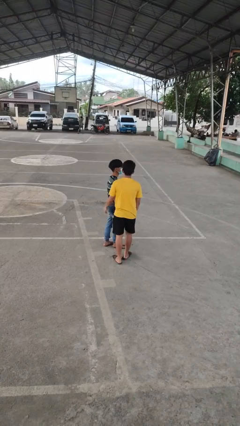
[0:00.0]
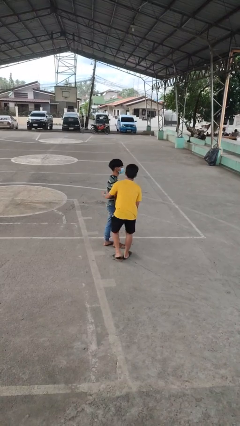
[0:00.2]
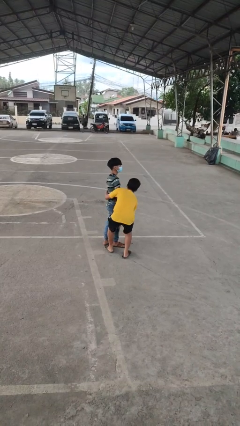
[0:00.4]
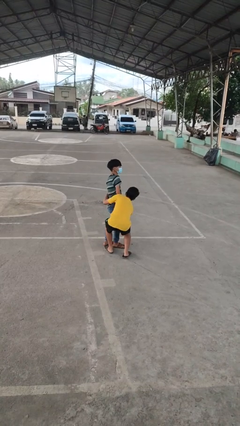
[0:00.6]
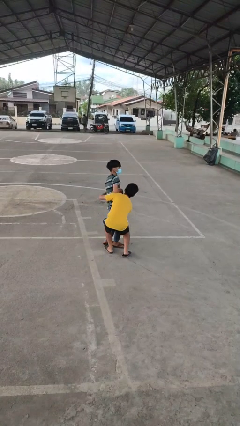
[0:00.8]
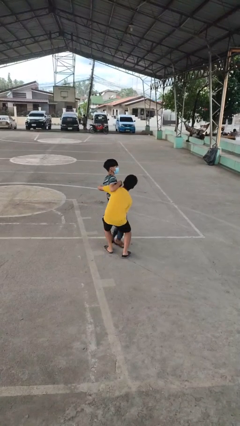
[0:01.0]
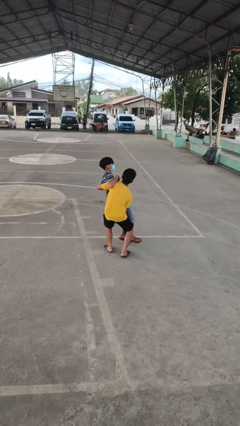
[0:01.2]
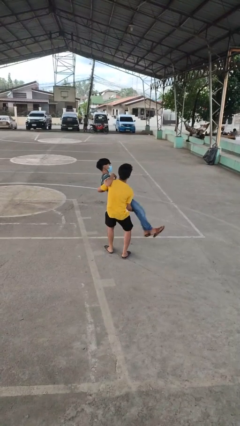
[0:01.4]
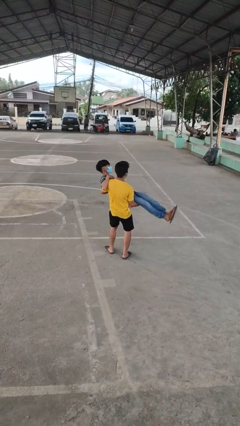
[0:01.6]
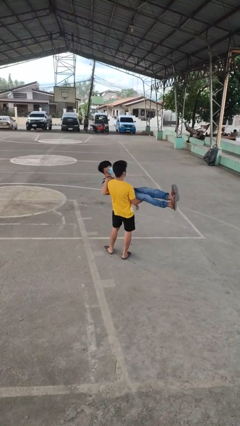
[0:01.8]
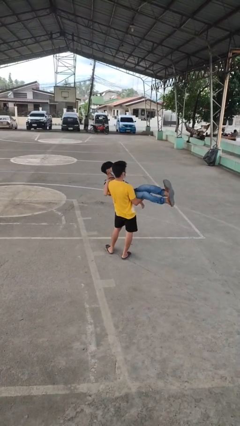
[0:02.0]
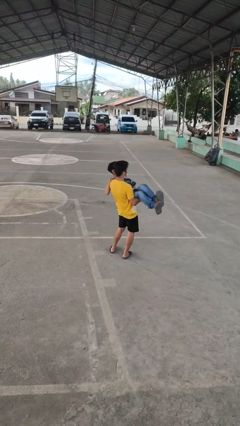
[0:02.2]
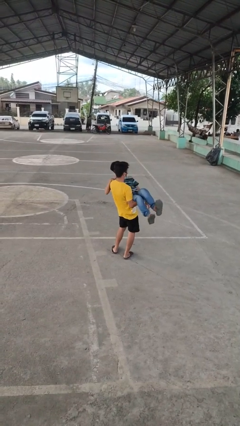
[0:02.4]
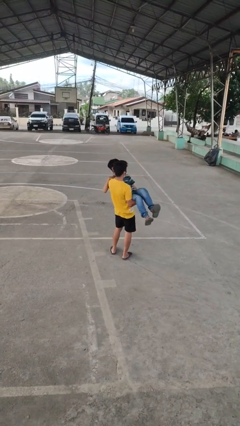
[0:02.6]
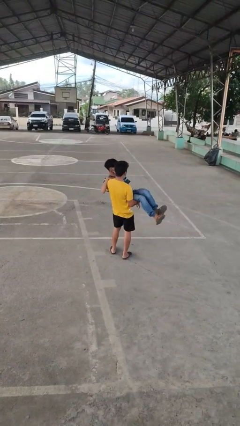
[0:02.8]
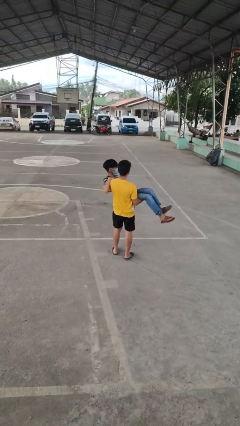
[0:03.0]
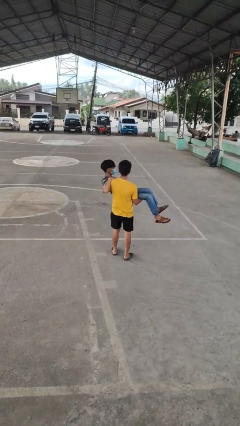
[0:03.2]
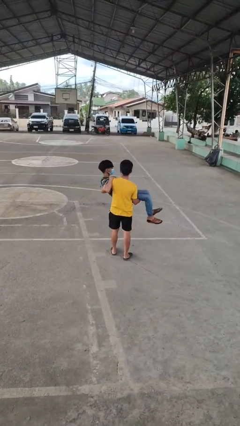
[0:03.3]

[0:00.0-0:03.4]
person picks up person

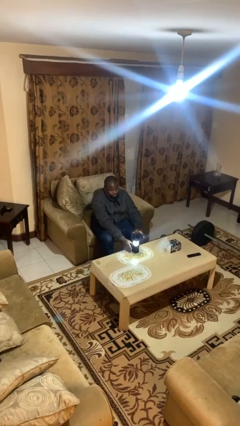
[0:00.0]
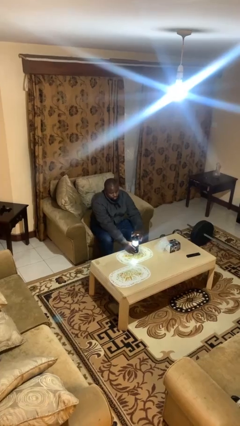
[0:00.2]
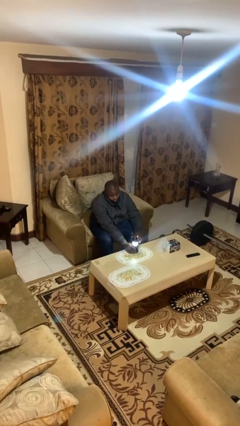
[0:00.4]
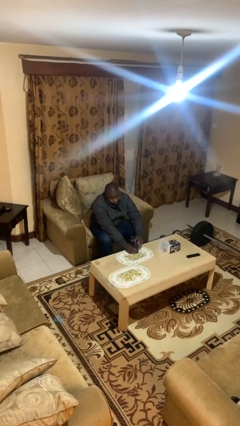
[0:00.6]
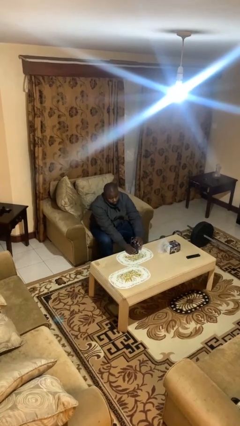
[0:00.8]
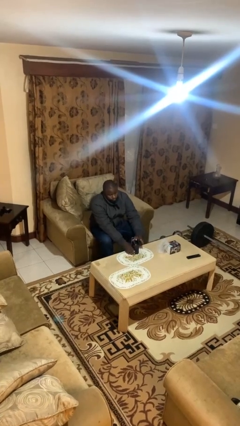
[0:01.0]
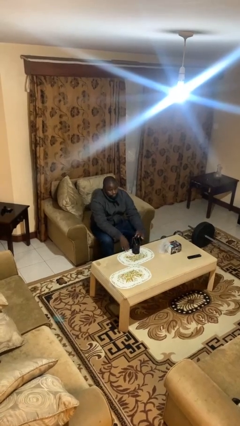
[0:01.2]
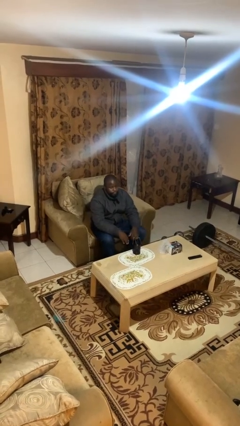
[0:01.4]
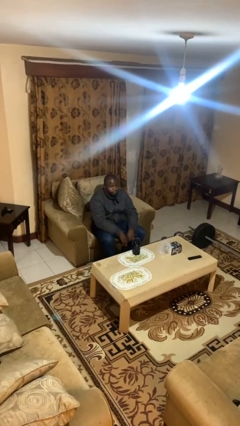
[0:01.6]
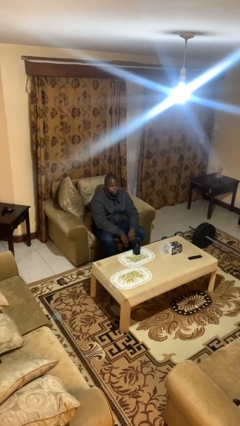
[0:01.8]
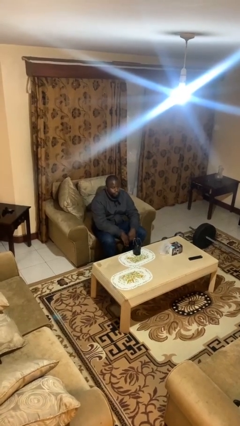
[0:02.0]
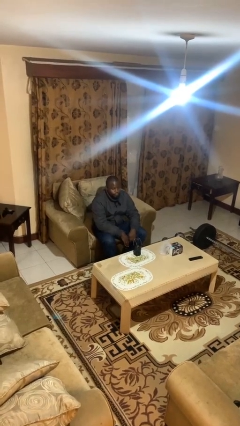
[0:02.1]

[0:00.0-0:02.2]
person turns off lamp

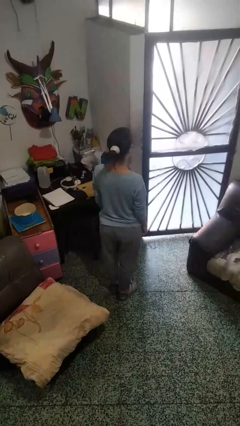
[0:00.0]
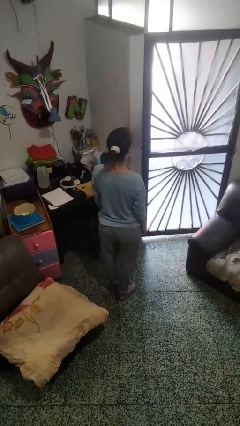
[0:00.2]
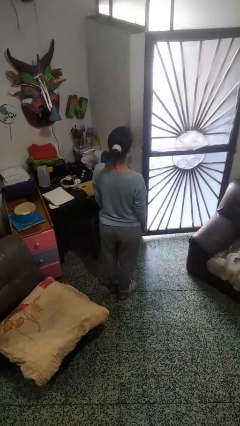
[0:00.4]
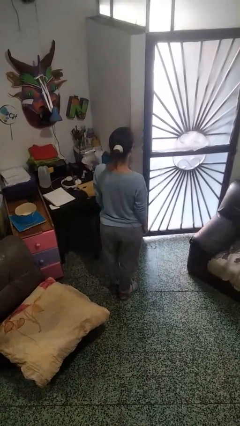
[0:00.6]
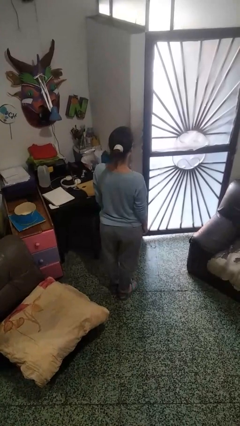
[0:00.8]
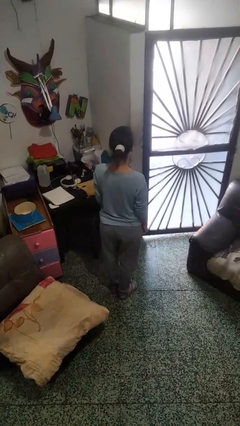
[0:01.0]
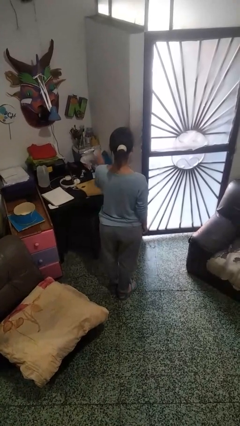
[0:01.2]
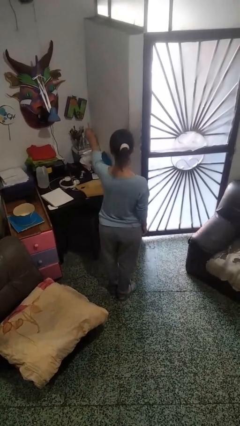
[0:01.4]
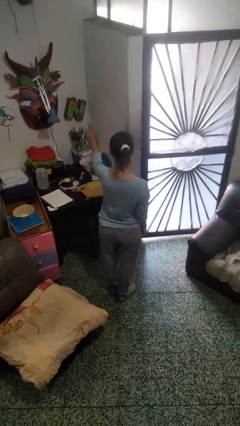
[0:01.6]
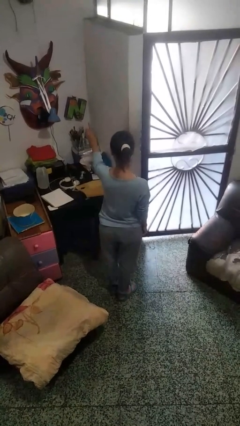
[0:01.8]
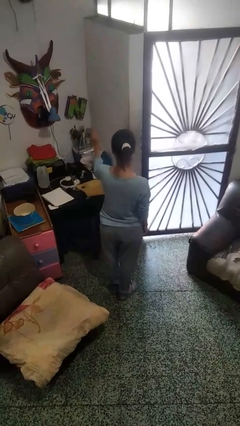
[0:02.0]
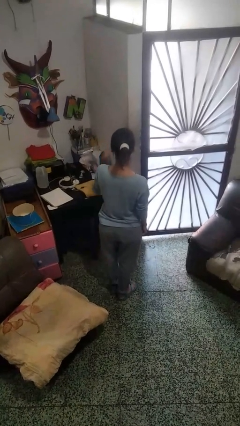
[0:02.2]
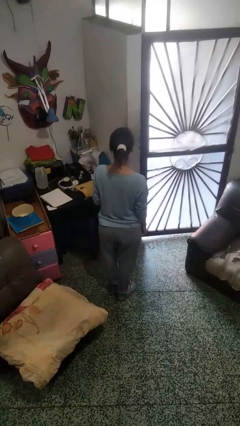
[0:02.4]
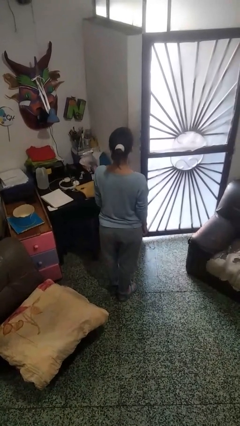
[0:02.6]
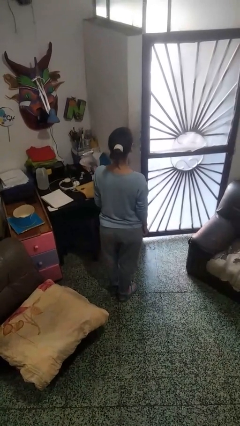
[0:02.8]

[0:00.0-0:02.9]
person gestures number one

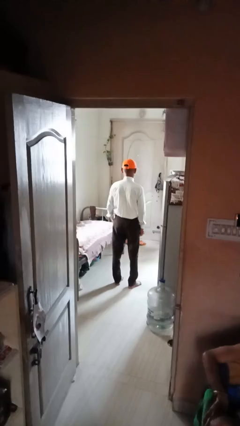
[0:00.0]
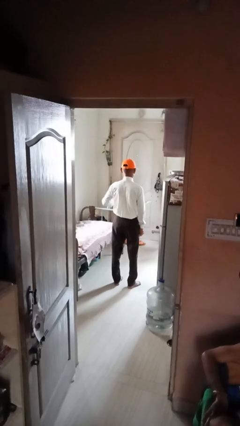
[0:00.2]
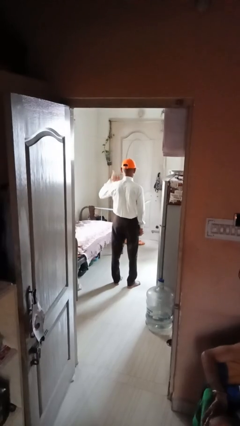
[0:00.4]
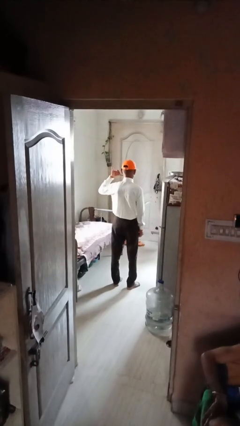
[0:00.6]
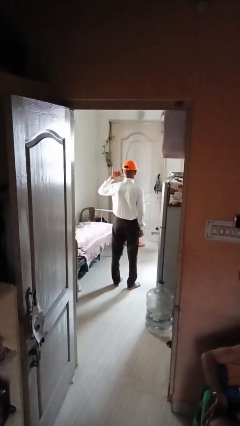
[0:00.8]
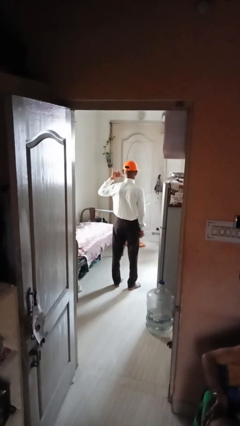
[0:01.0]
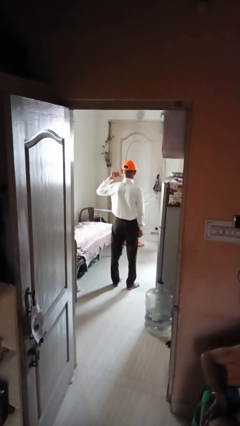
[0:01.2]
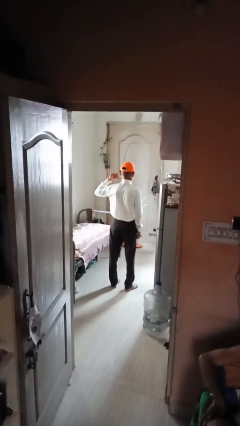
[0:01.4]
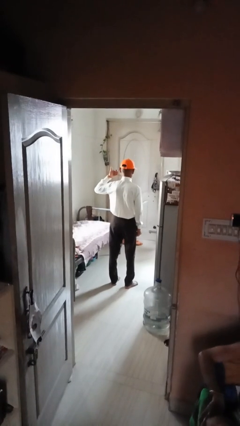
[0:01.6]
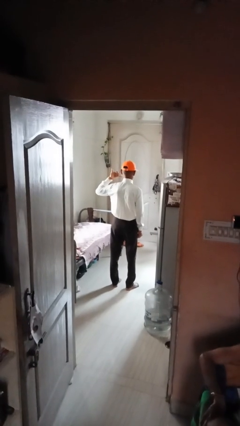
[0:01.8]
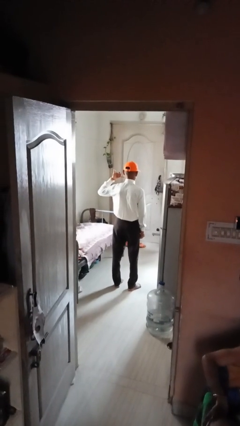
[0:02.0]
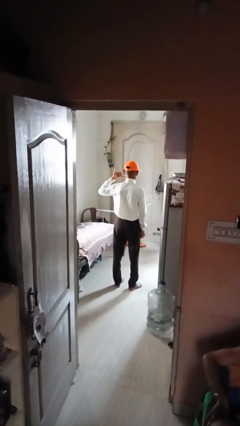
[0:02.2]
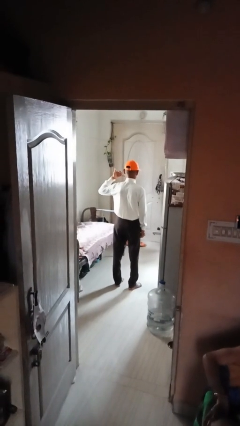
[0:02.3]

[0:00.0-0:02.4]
person gestures call me

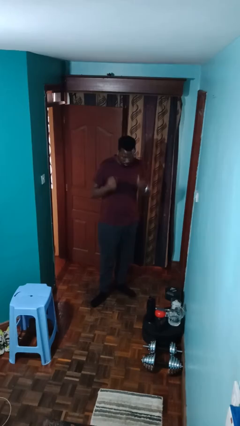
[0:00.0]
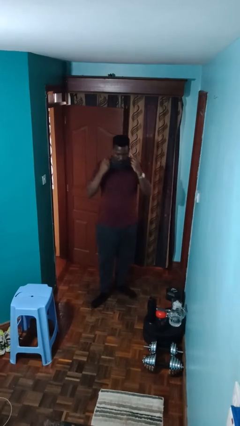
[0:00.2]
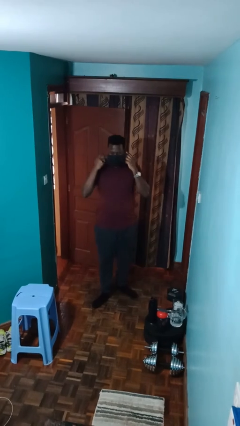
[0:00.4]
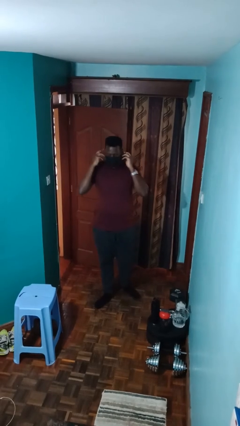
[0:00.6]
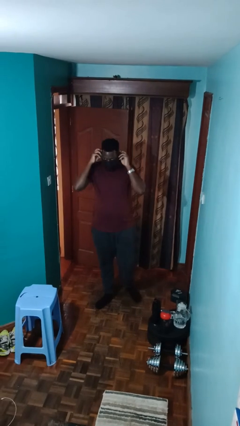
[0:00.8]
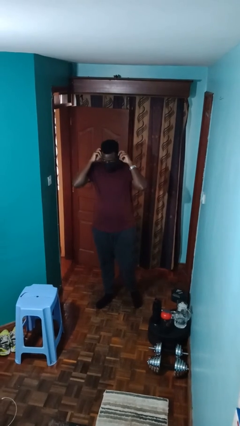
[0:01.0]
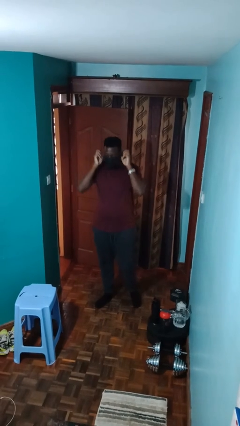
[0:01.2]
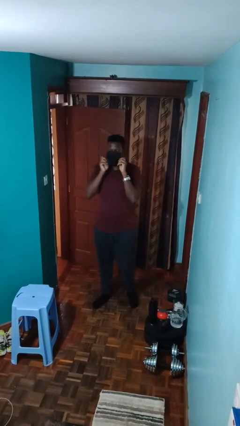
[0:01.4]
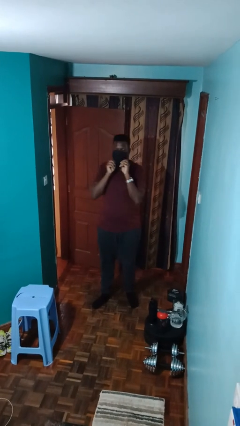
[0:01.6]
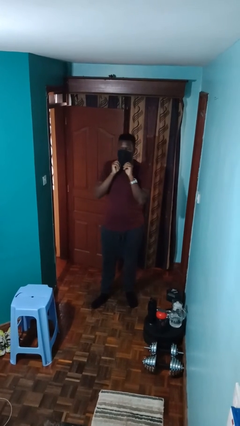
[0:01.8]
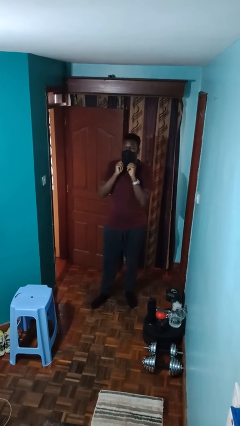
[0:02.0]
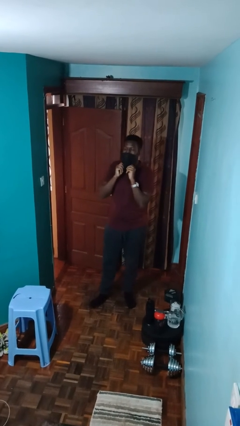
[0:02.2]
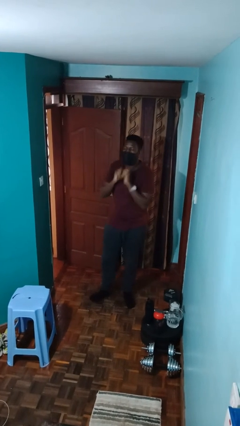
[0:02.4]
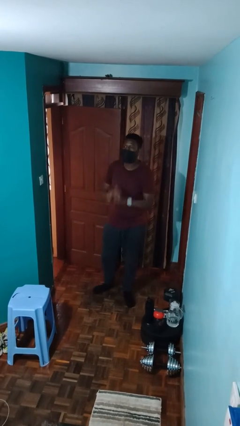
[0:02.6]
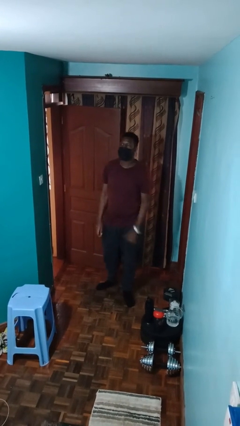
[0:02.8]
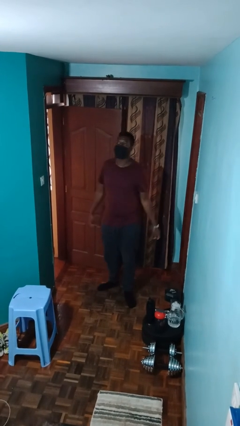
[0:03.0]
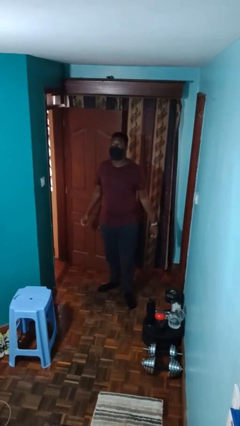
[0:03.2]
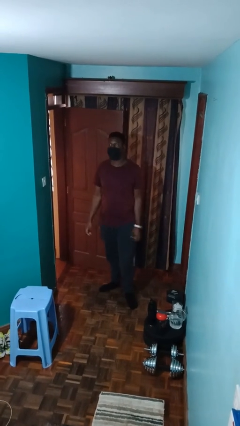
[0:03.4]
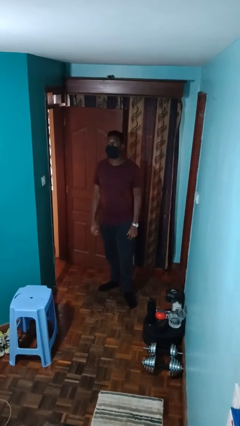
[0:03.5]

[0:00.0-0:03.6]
person puts on facemask

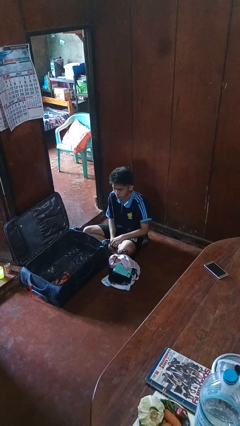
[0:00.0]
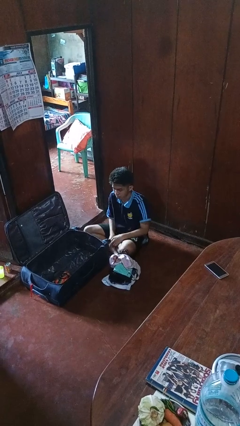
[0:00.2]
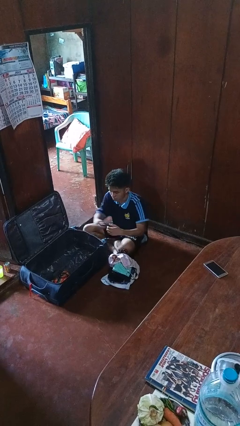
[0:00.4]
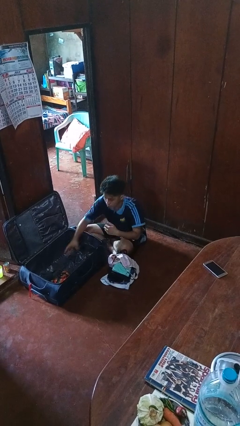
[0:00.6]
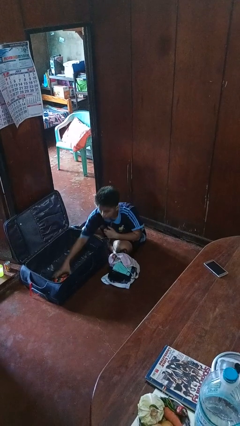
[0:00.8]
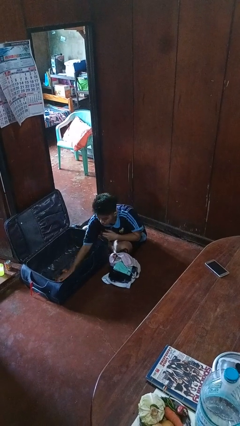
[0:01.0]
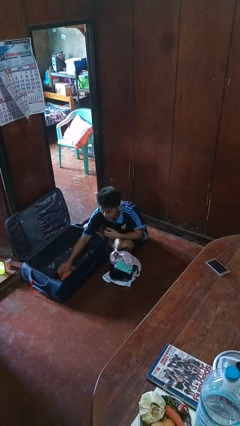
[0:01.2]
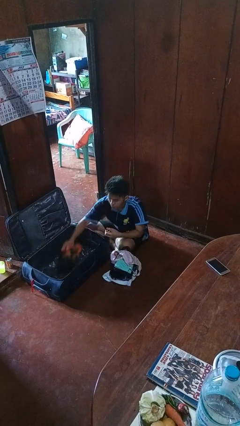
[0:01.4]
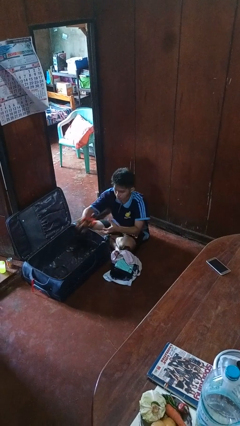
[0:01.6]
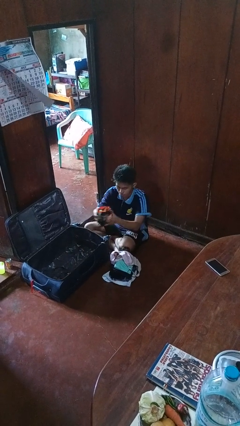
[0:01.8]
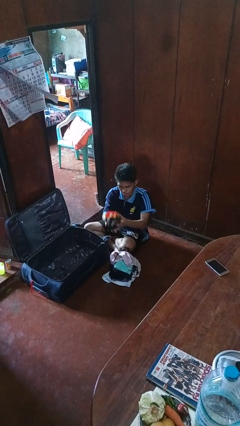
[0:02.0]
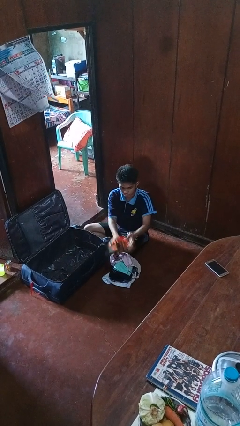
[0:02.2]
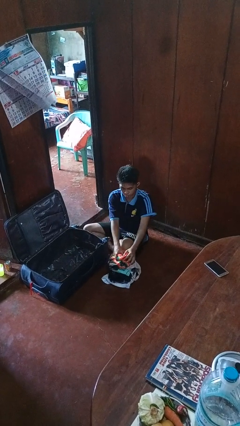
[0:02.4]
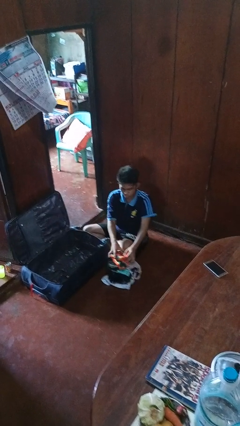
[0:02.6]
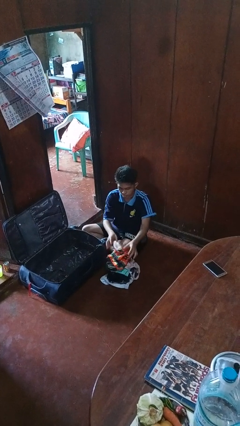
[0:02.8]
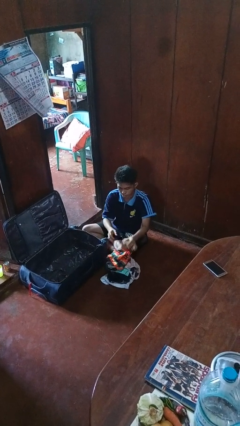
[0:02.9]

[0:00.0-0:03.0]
person unloads clothes from suitcase

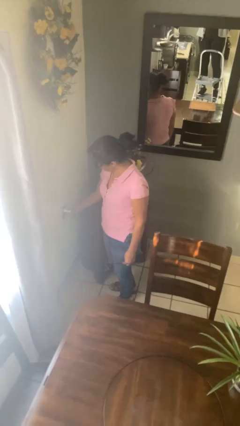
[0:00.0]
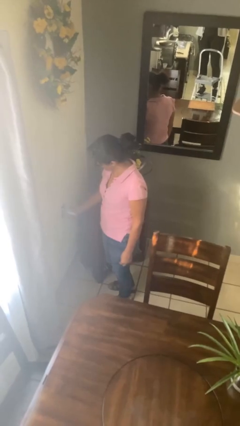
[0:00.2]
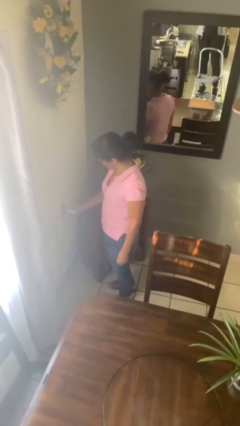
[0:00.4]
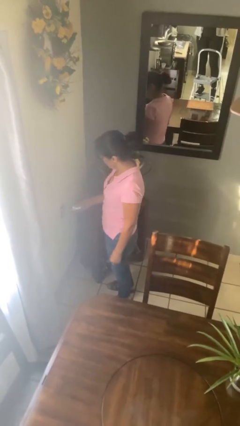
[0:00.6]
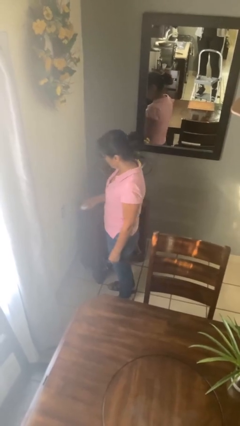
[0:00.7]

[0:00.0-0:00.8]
person unplugs from electrical socket
